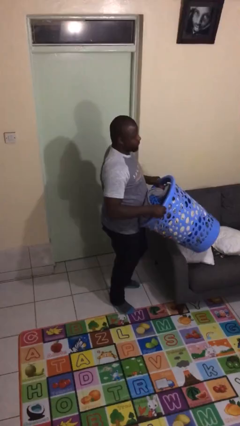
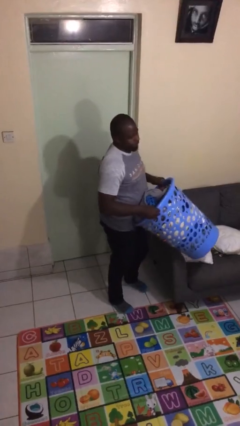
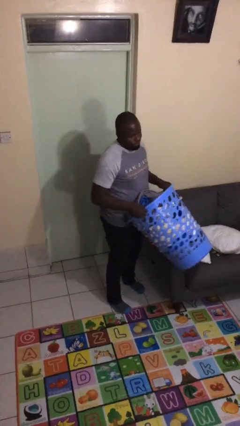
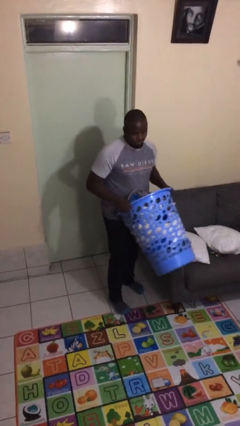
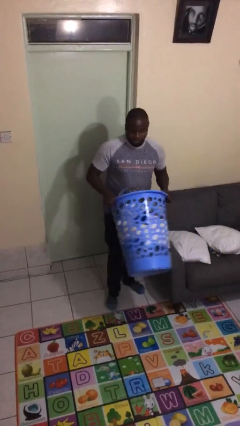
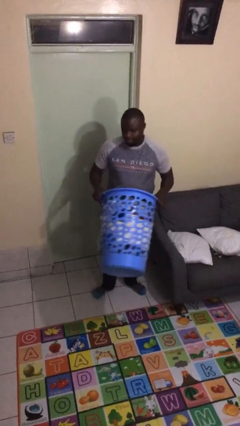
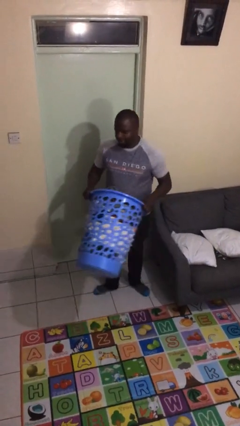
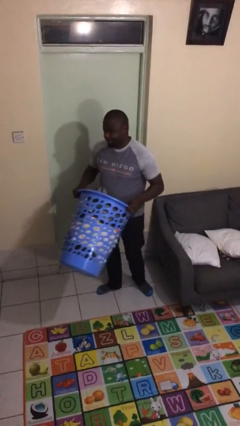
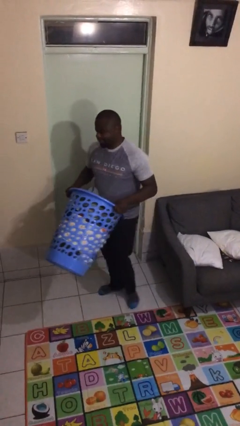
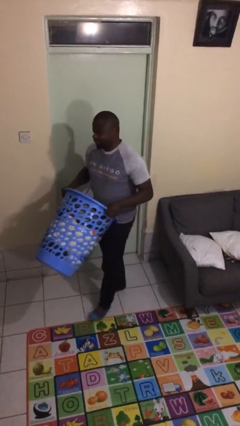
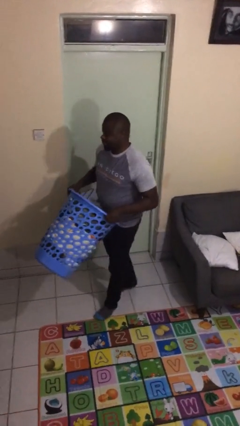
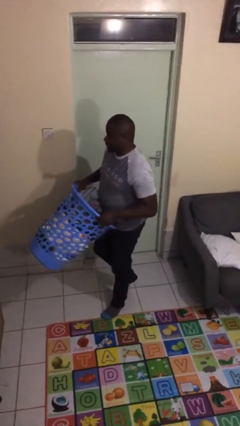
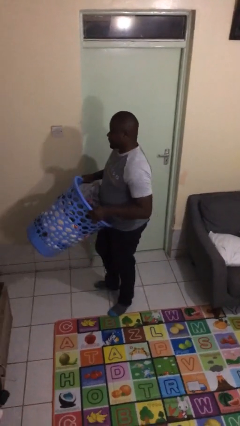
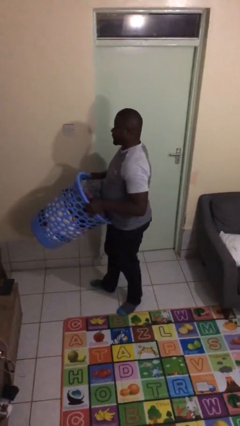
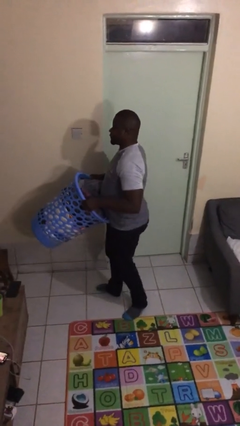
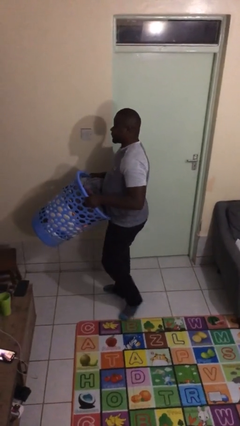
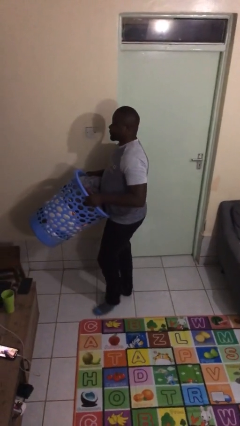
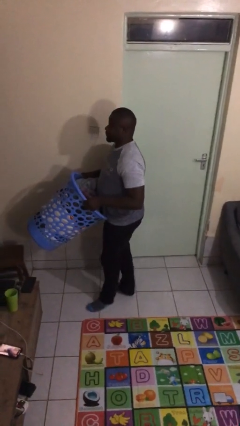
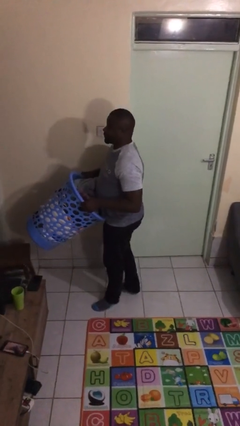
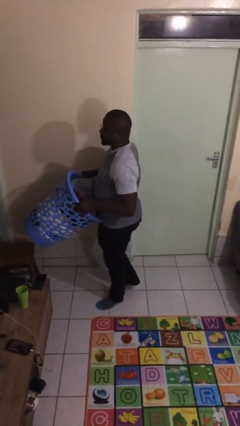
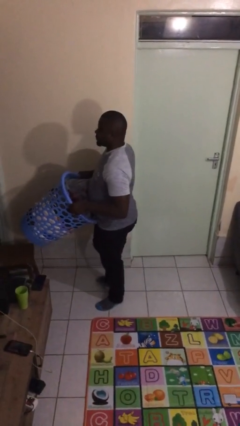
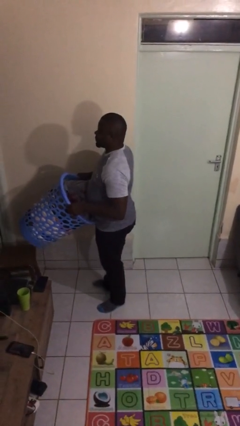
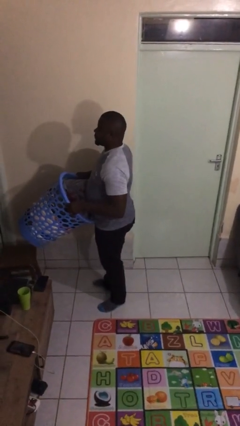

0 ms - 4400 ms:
person carries laundry basket

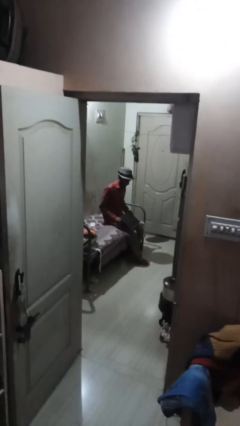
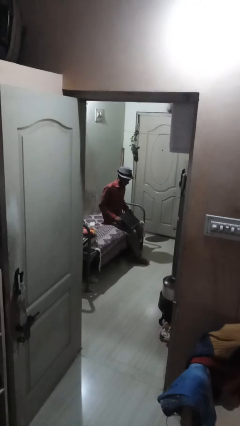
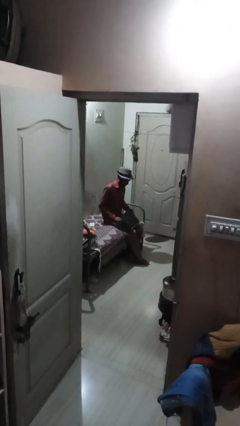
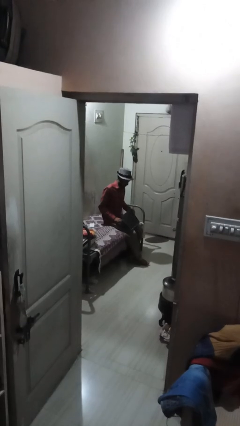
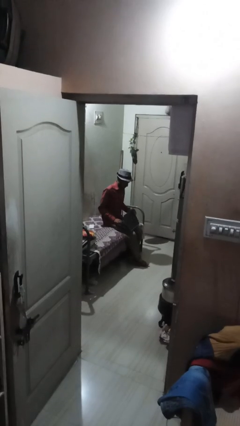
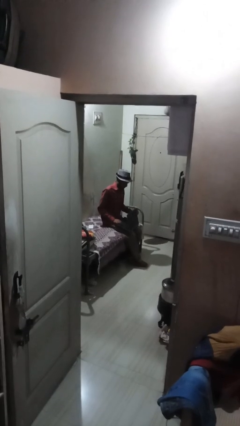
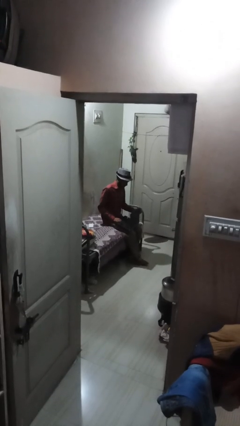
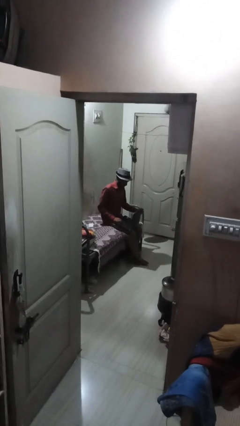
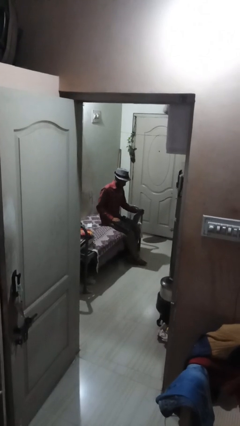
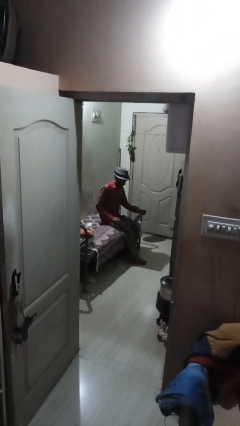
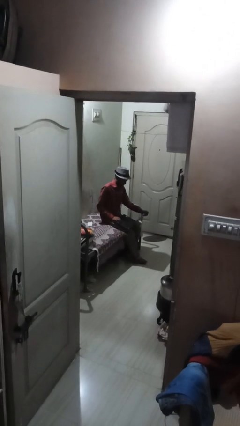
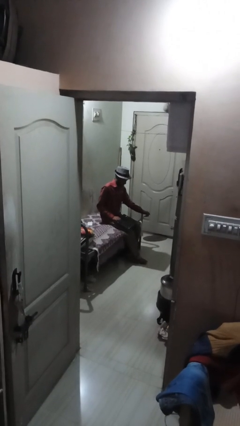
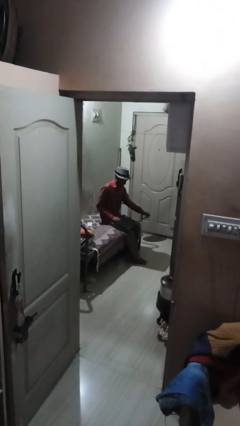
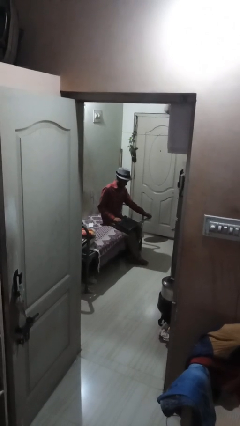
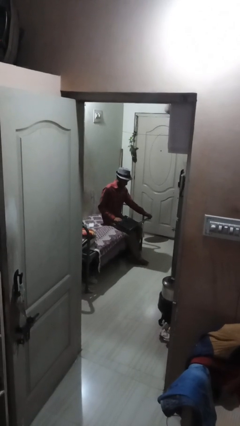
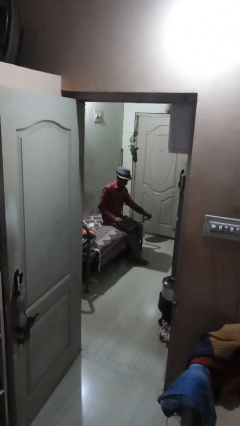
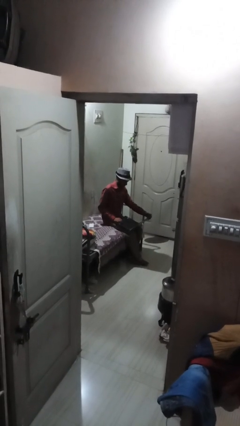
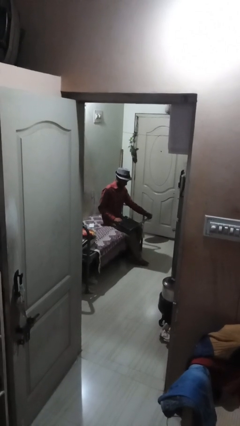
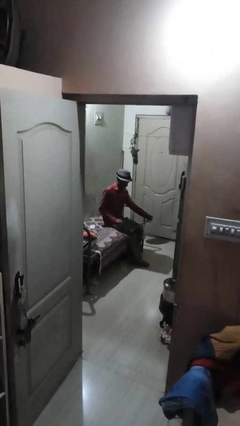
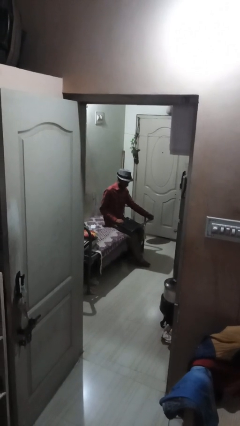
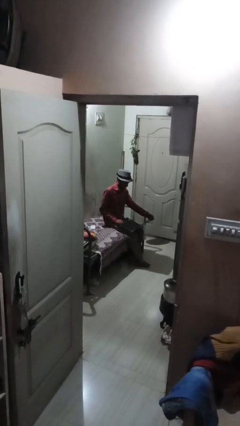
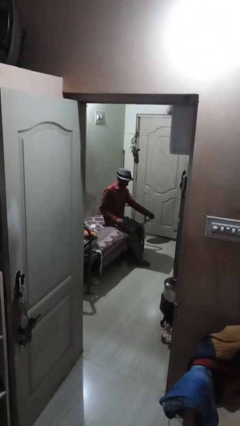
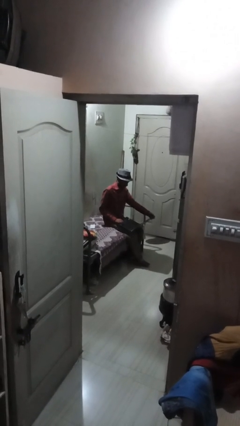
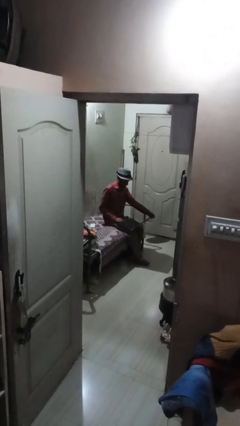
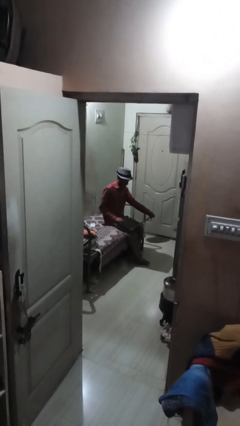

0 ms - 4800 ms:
person opens laptop

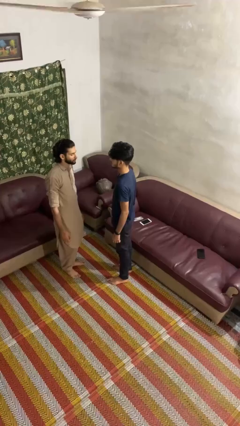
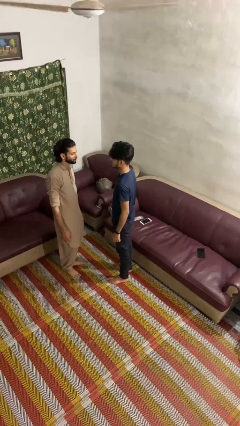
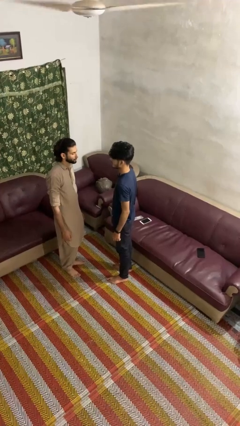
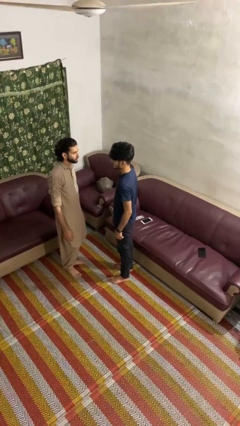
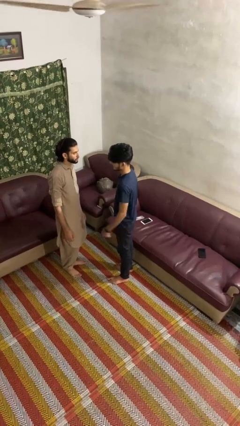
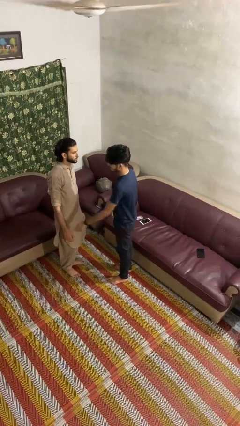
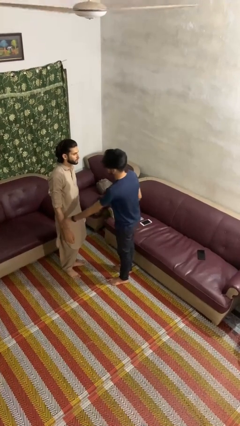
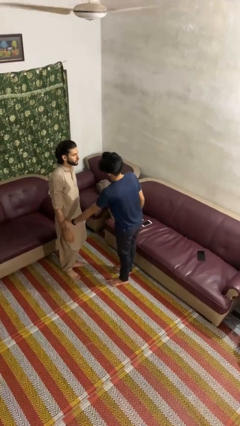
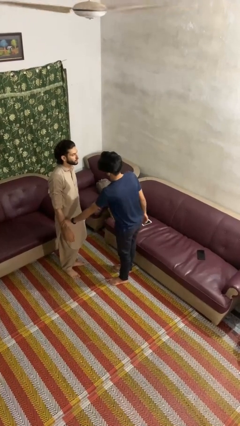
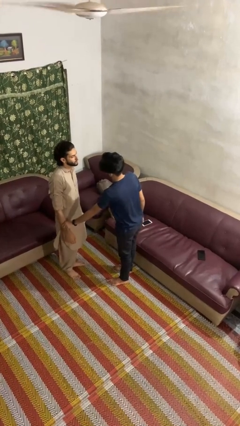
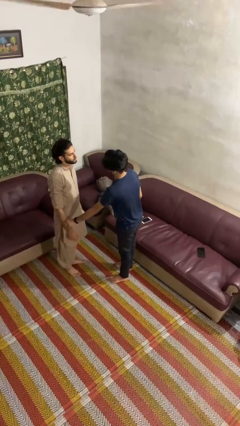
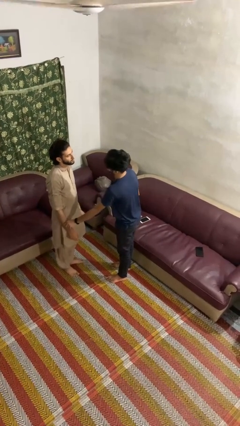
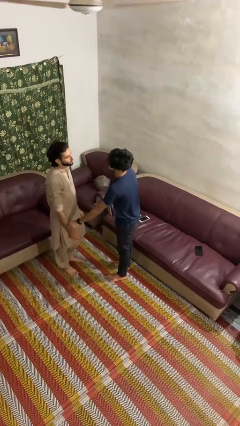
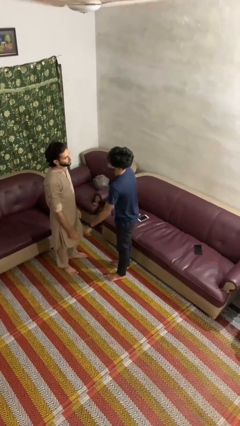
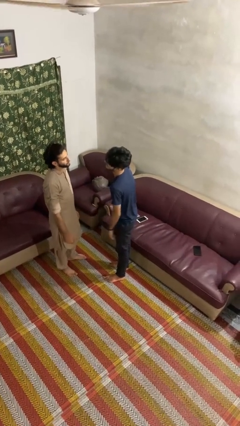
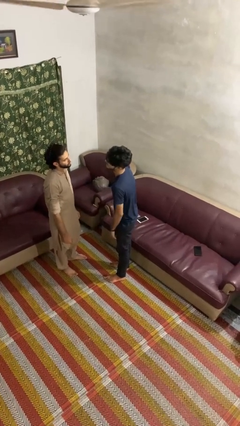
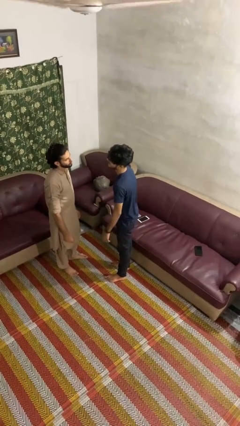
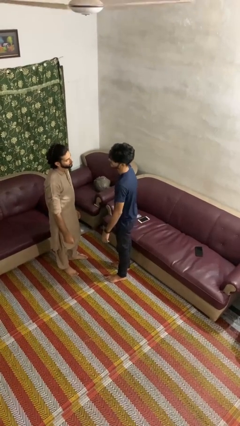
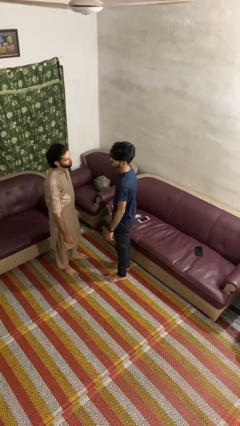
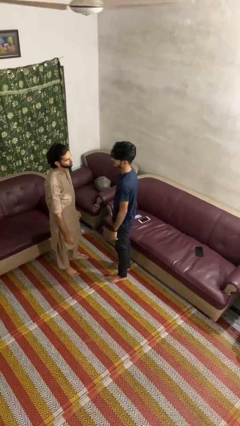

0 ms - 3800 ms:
person grabs person by forearm

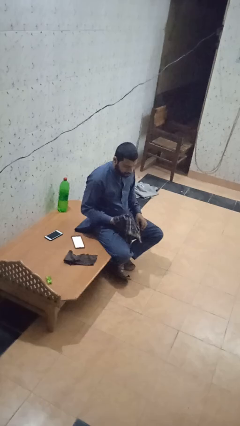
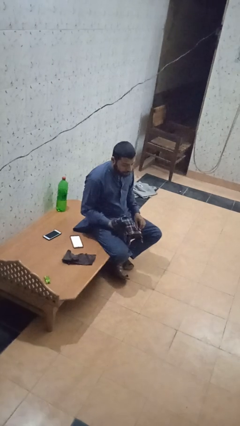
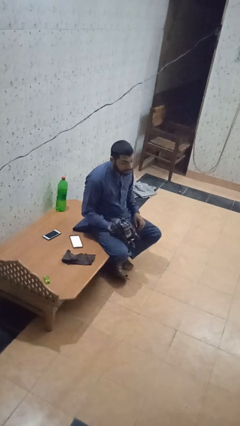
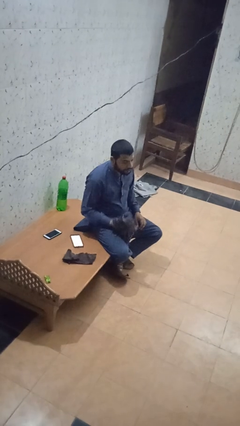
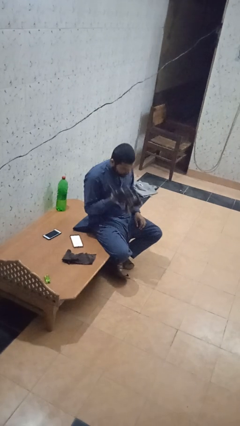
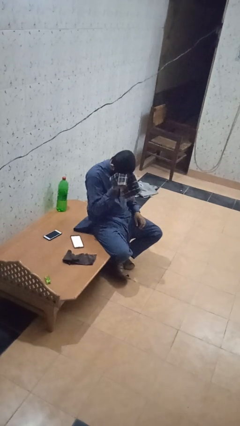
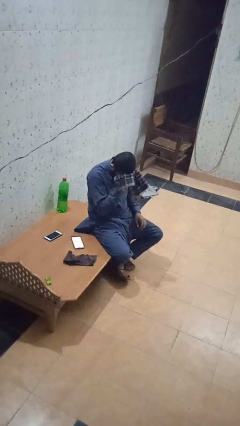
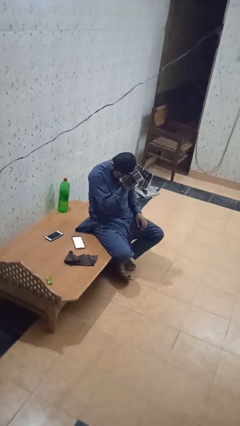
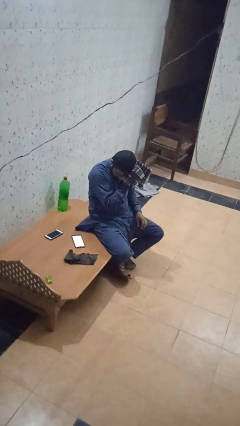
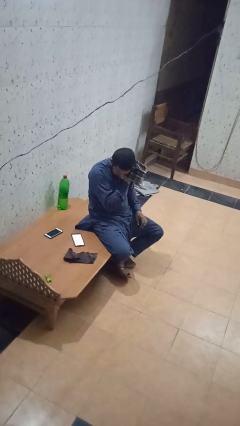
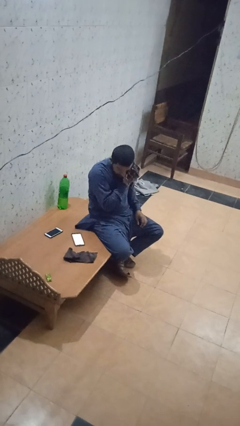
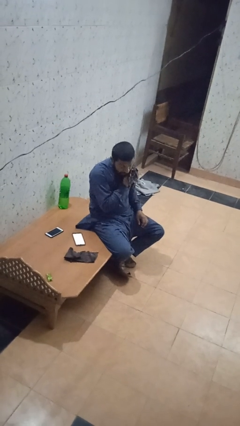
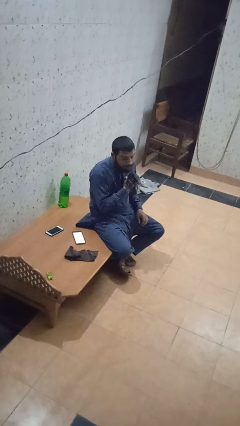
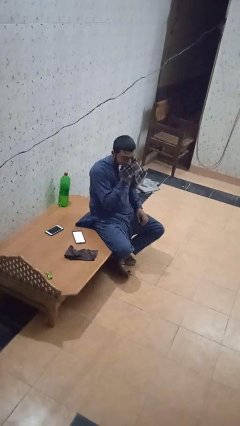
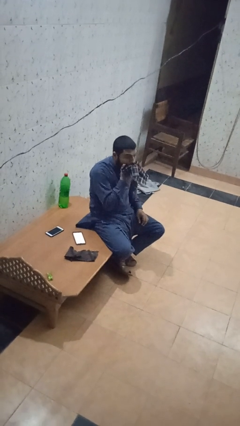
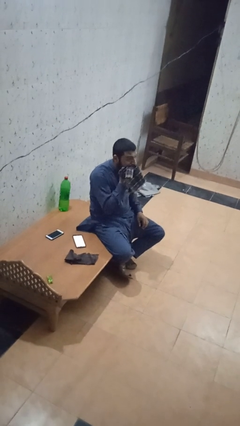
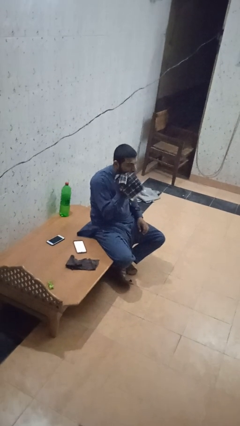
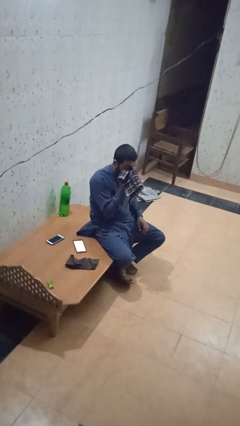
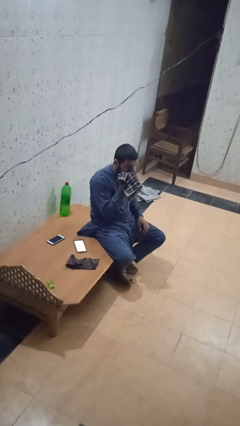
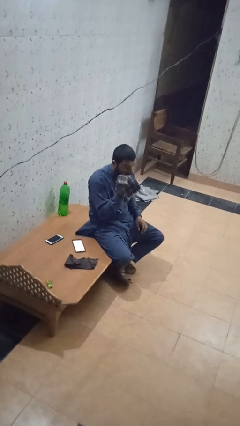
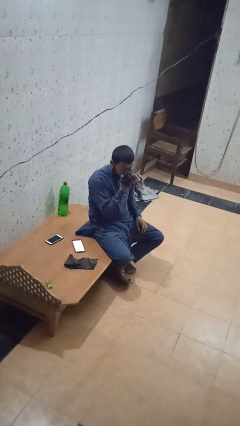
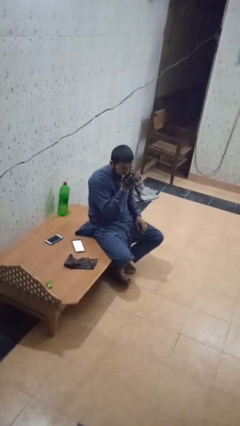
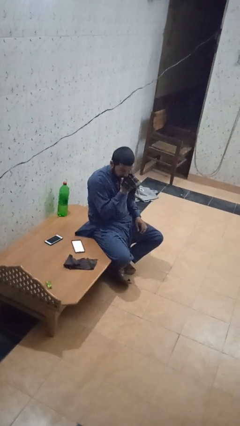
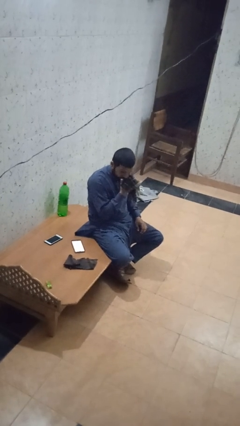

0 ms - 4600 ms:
person wipes mouth with napkin
